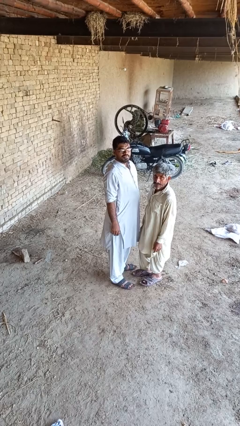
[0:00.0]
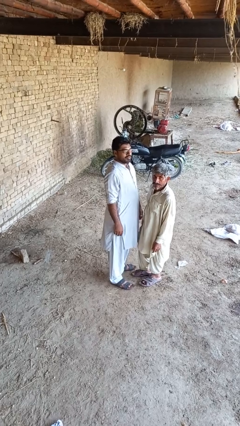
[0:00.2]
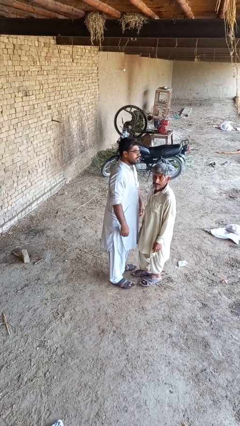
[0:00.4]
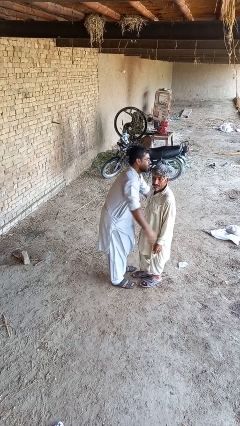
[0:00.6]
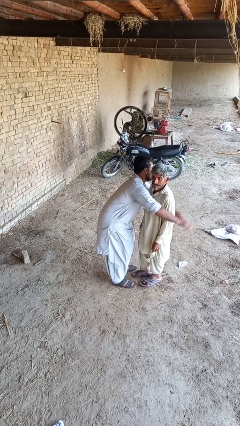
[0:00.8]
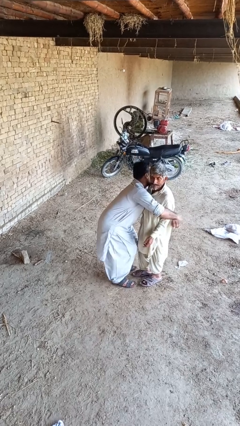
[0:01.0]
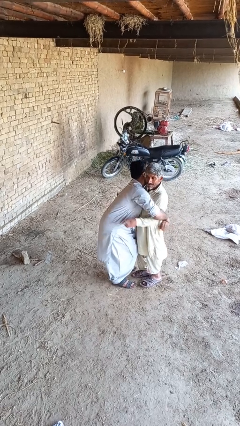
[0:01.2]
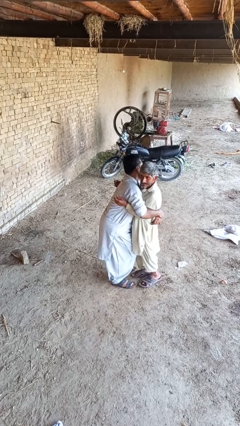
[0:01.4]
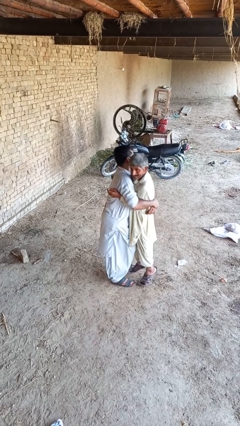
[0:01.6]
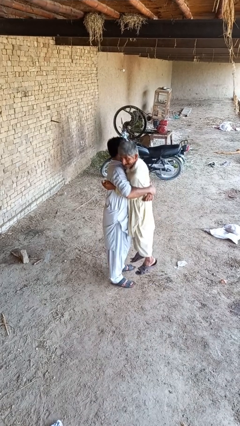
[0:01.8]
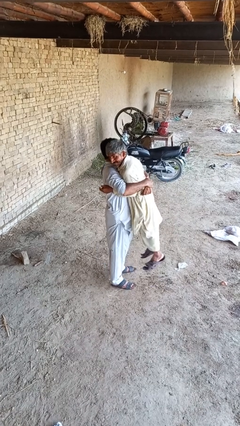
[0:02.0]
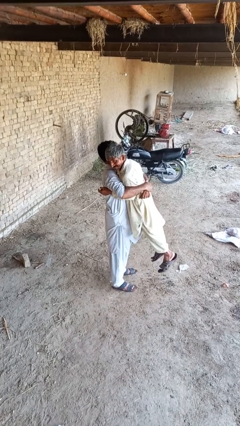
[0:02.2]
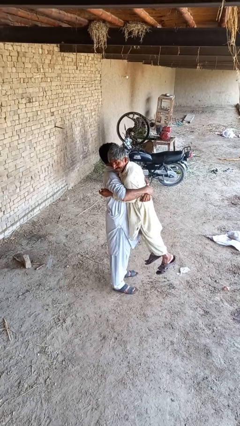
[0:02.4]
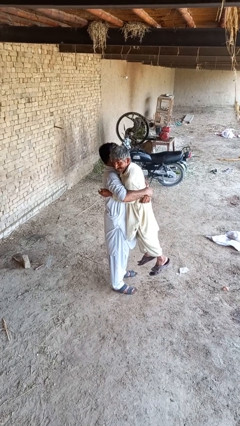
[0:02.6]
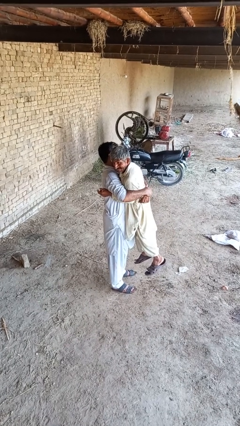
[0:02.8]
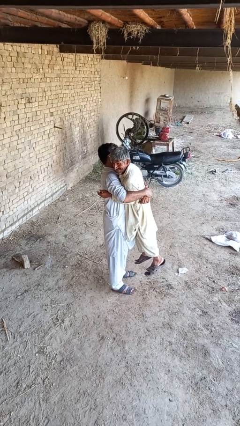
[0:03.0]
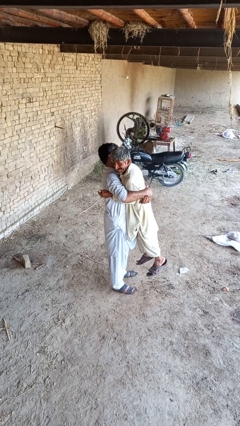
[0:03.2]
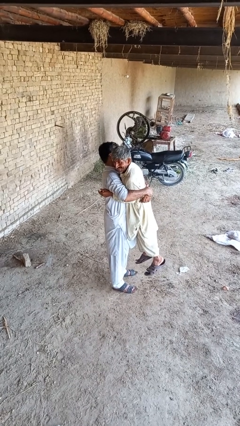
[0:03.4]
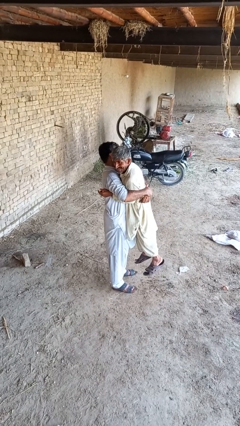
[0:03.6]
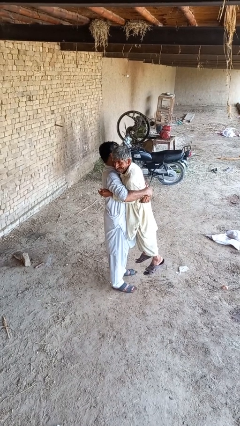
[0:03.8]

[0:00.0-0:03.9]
person picks up person

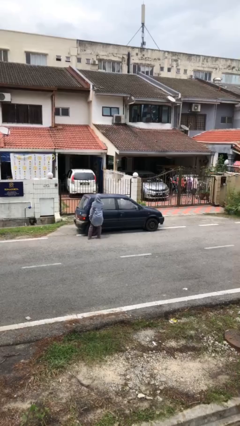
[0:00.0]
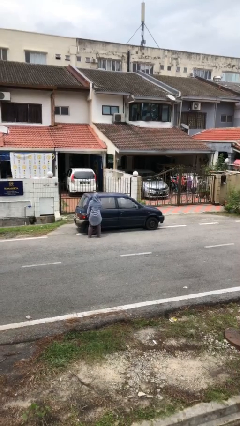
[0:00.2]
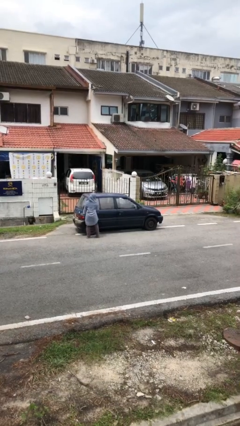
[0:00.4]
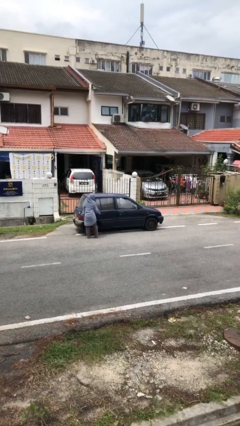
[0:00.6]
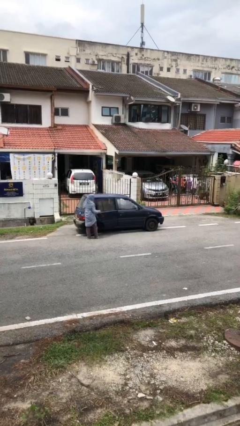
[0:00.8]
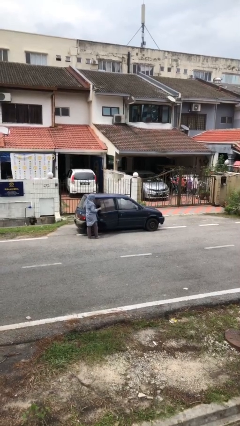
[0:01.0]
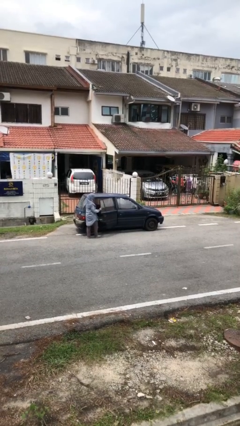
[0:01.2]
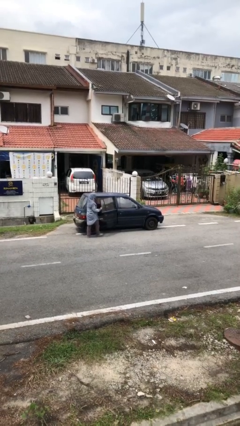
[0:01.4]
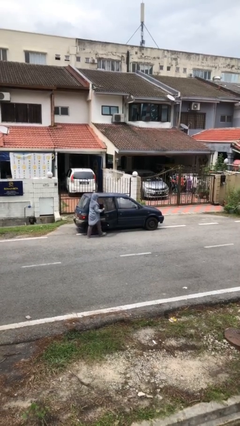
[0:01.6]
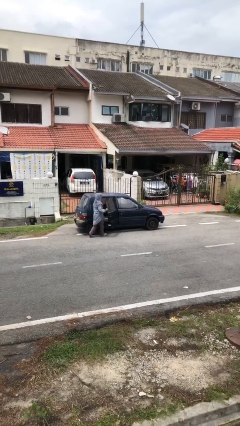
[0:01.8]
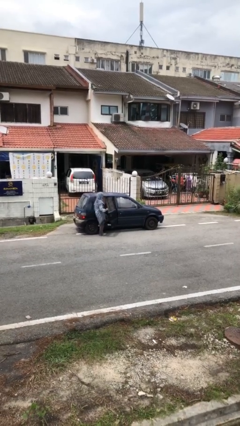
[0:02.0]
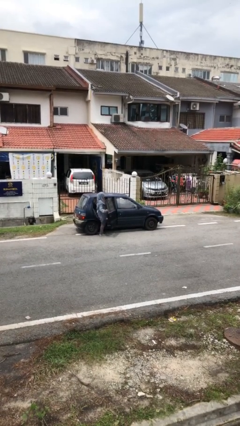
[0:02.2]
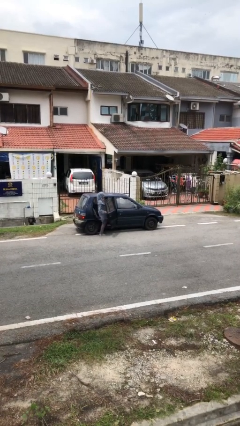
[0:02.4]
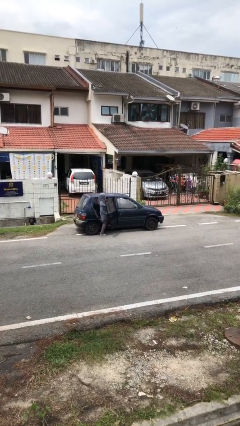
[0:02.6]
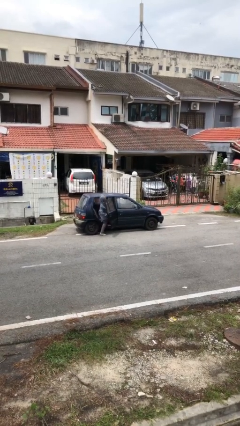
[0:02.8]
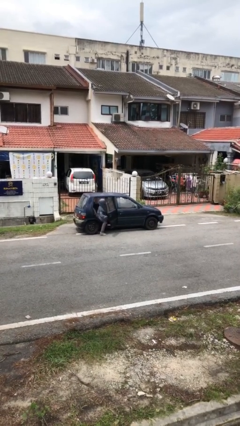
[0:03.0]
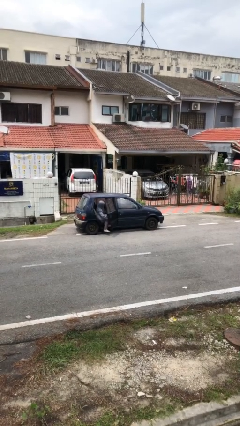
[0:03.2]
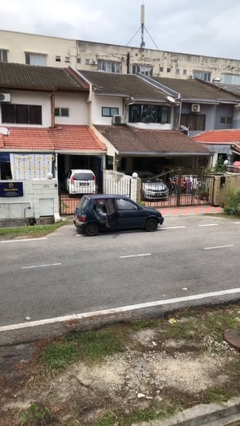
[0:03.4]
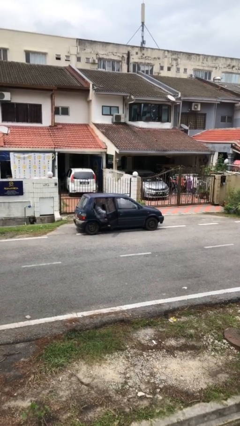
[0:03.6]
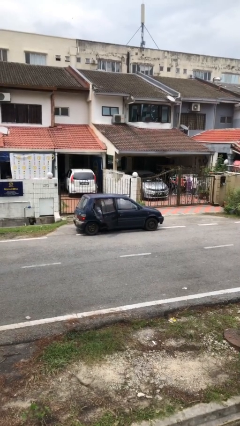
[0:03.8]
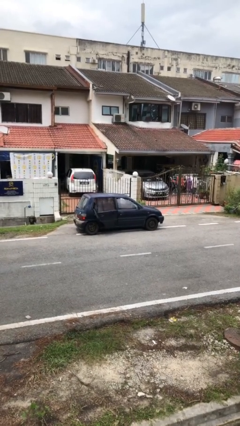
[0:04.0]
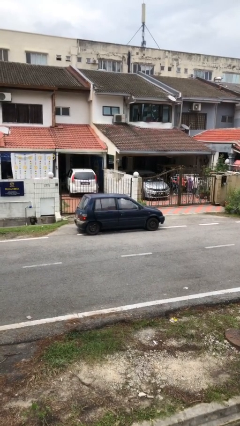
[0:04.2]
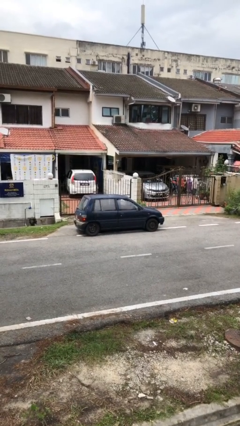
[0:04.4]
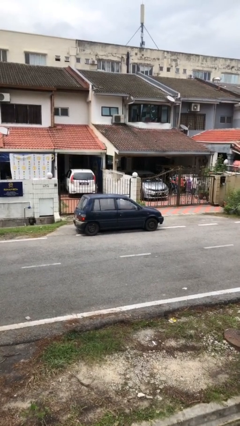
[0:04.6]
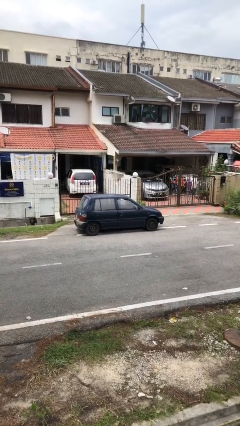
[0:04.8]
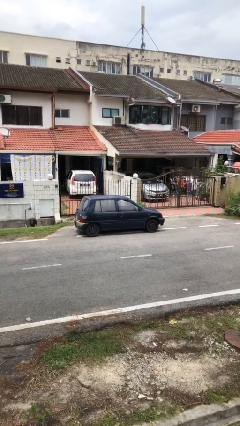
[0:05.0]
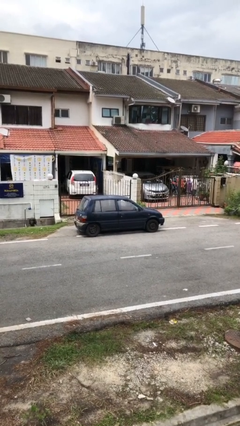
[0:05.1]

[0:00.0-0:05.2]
car picks up person

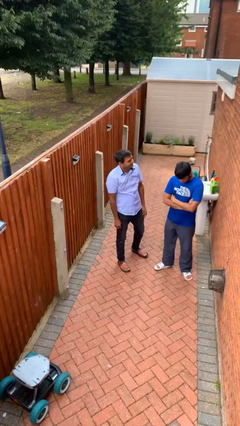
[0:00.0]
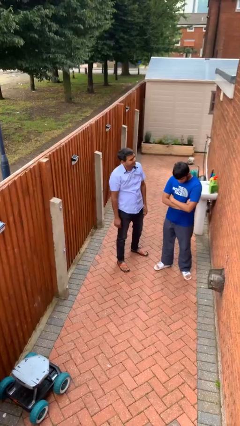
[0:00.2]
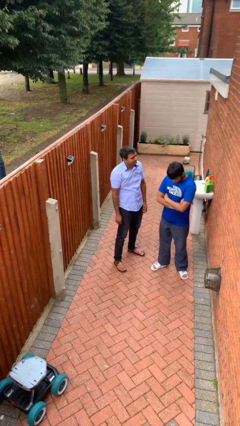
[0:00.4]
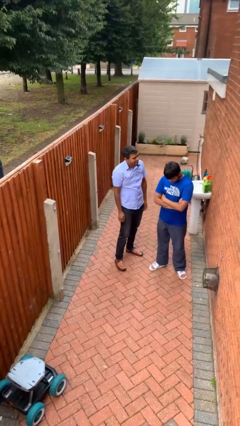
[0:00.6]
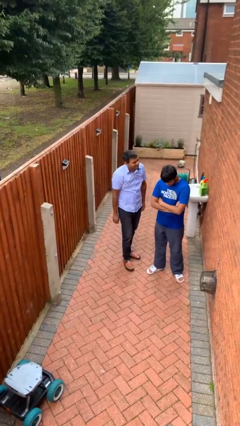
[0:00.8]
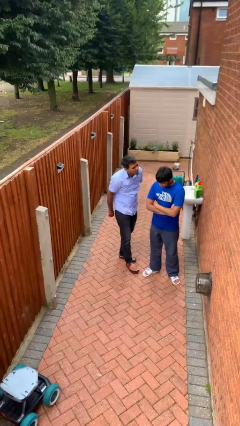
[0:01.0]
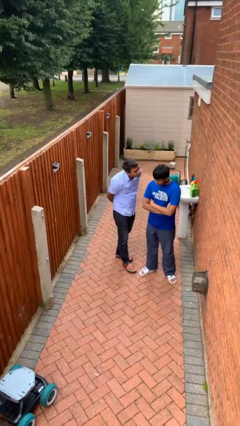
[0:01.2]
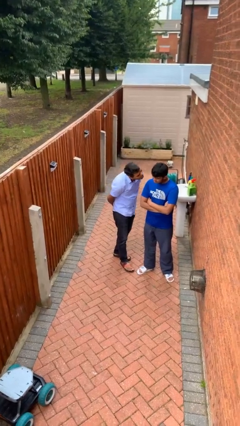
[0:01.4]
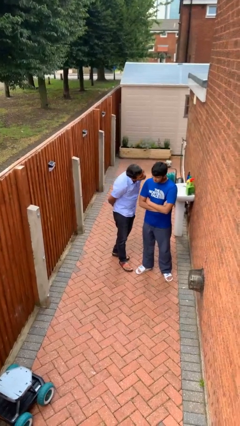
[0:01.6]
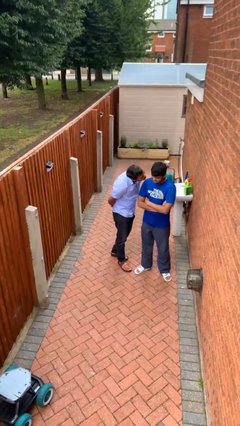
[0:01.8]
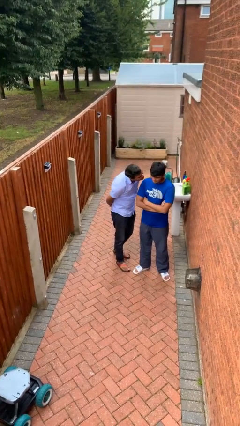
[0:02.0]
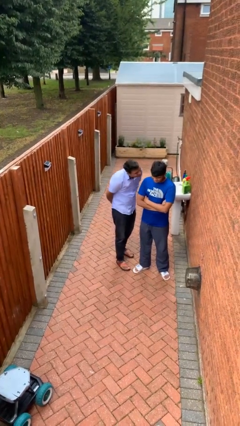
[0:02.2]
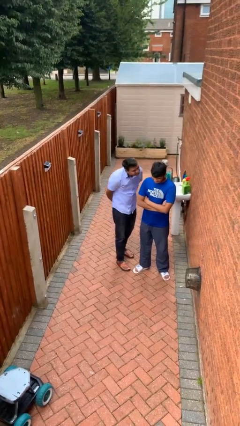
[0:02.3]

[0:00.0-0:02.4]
person kisses cheek of person

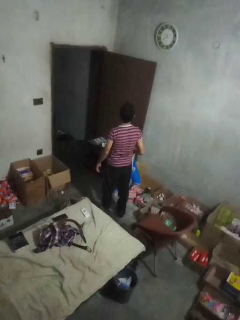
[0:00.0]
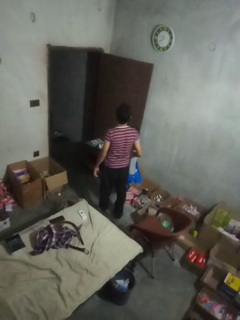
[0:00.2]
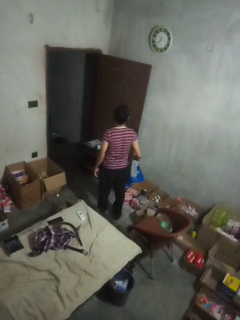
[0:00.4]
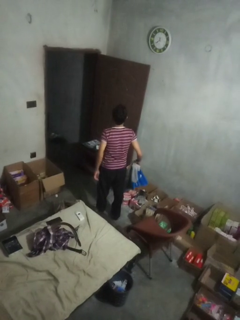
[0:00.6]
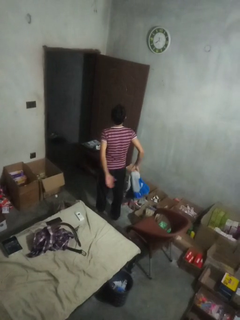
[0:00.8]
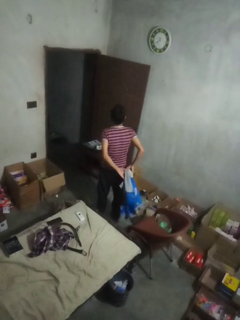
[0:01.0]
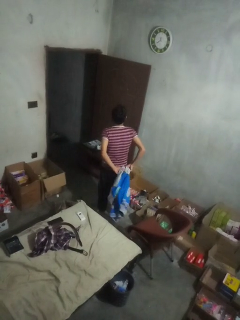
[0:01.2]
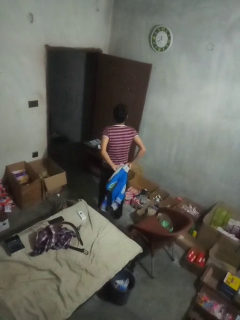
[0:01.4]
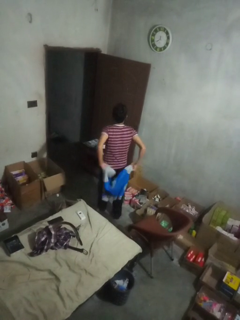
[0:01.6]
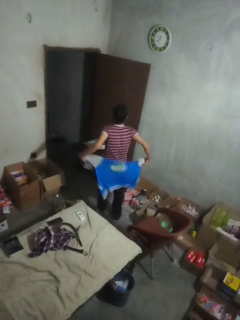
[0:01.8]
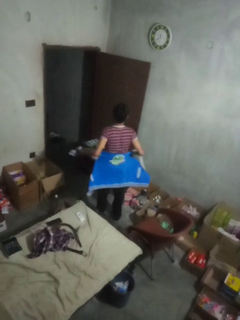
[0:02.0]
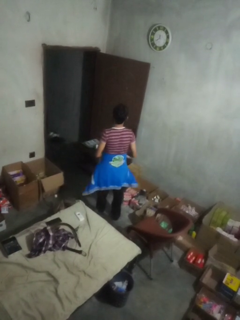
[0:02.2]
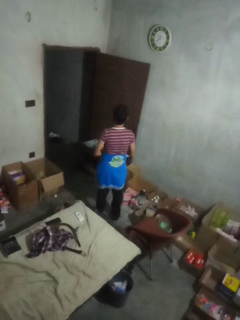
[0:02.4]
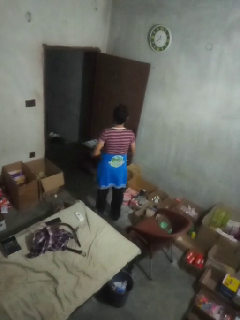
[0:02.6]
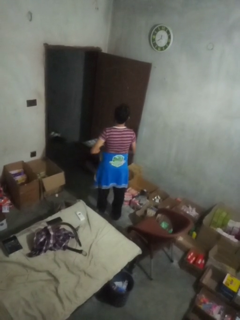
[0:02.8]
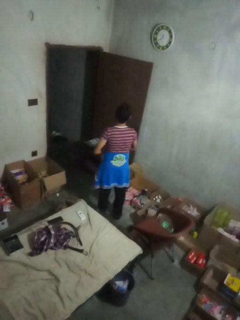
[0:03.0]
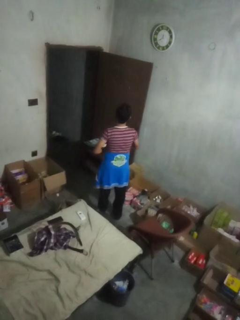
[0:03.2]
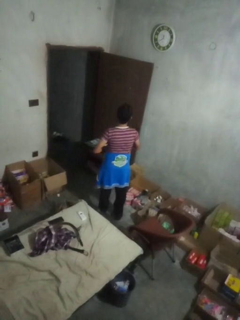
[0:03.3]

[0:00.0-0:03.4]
person ties jacket around waist

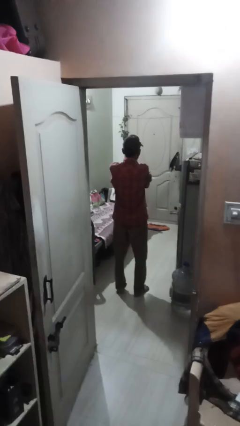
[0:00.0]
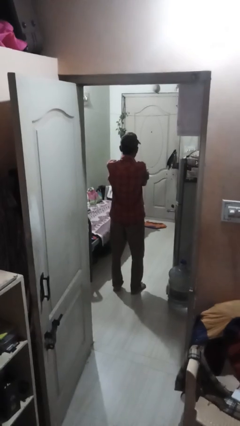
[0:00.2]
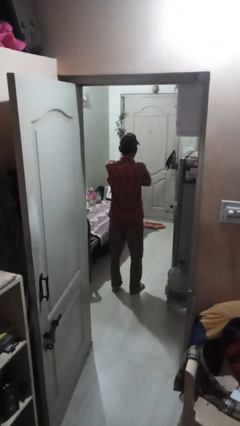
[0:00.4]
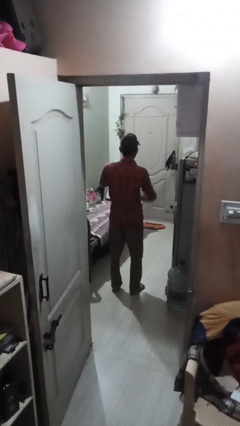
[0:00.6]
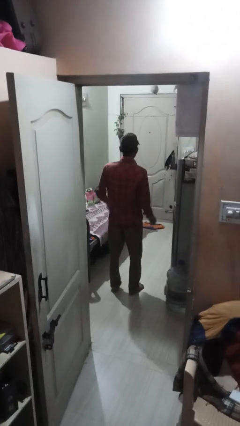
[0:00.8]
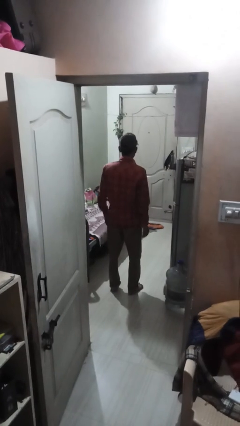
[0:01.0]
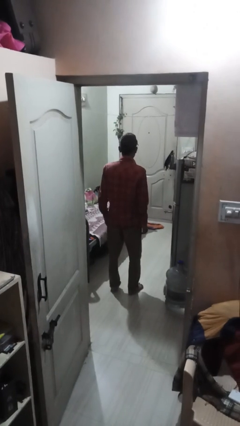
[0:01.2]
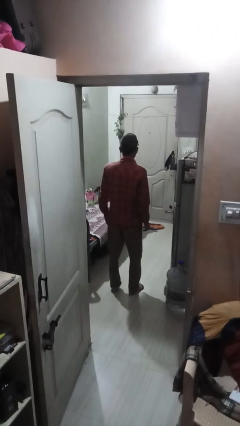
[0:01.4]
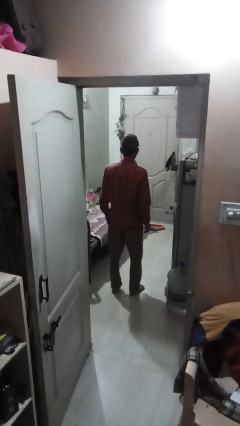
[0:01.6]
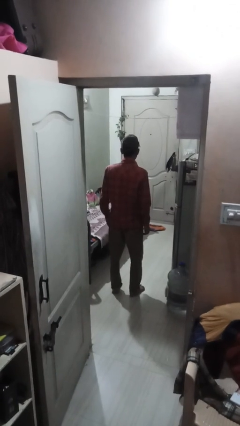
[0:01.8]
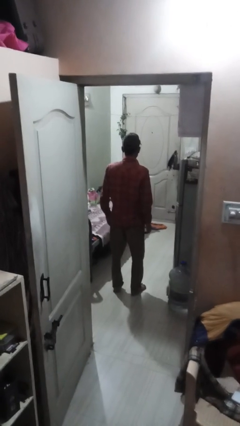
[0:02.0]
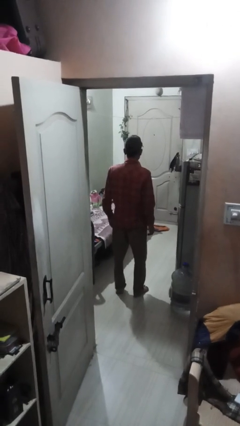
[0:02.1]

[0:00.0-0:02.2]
person crosses arms

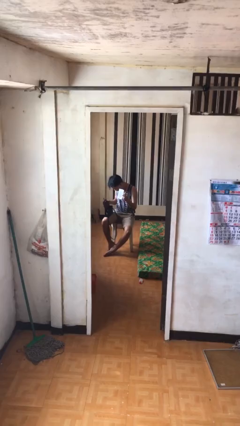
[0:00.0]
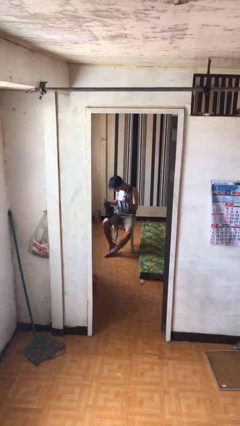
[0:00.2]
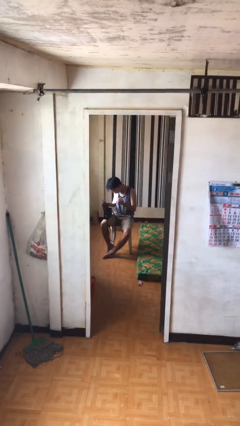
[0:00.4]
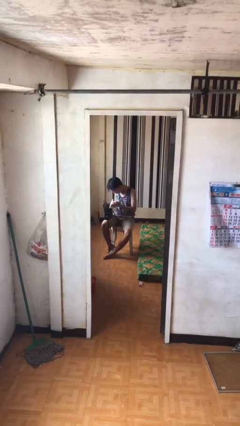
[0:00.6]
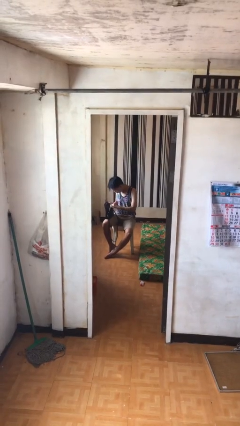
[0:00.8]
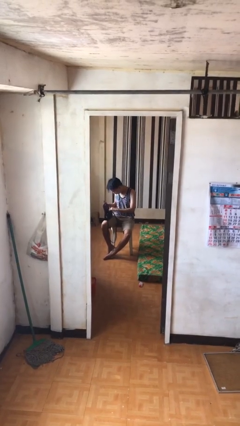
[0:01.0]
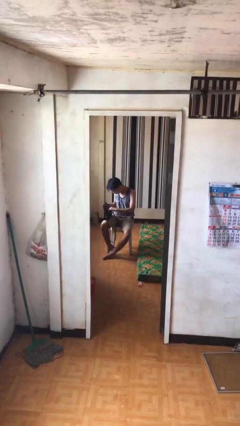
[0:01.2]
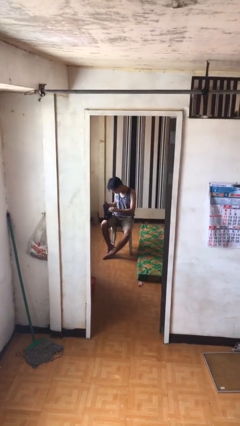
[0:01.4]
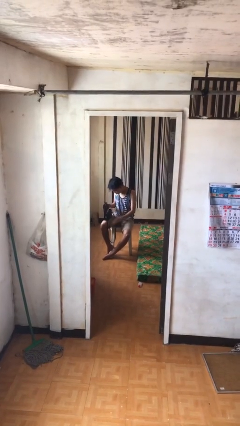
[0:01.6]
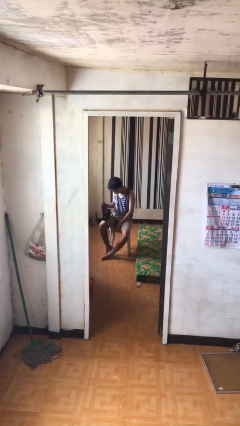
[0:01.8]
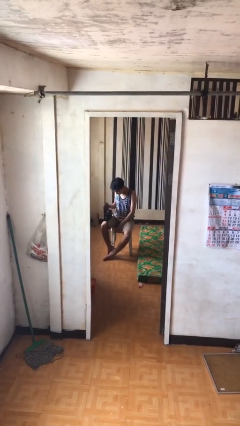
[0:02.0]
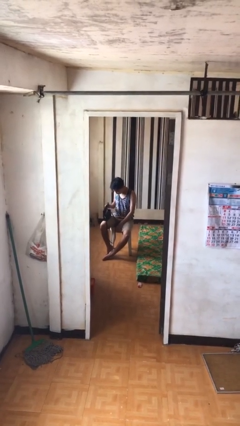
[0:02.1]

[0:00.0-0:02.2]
person puts object into purse
